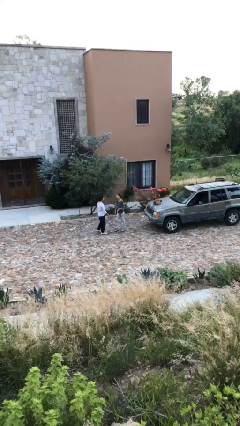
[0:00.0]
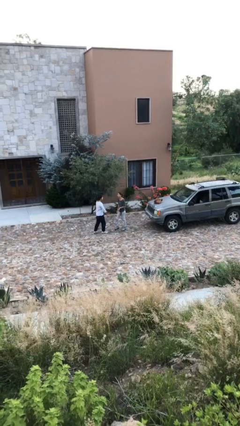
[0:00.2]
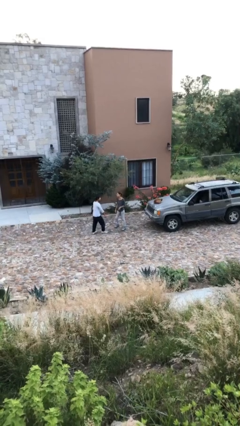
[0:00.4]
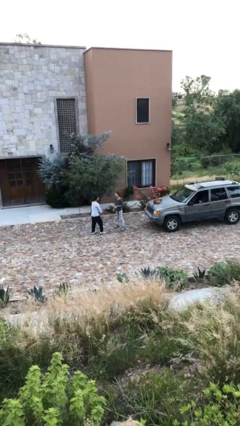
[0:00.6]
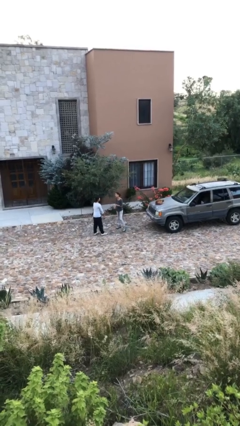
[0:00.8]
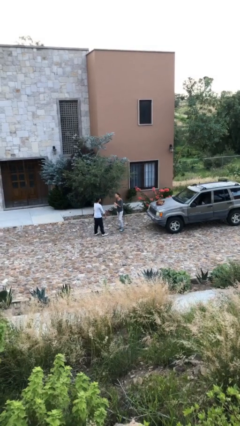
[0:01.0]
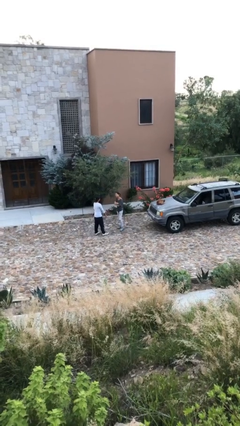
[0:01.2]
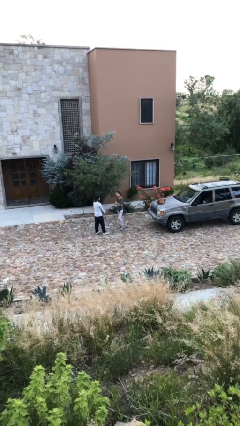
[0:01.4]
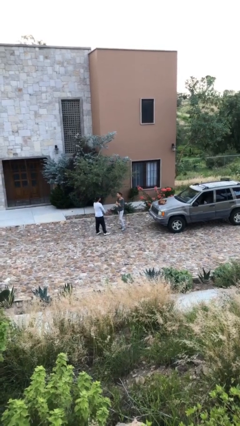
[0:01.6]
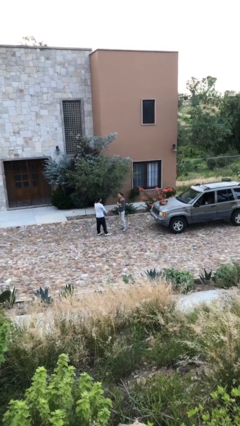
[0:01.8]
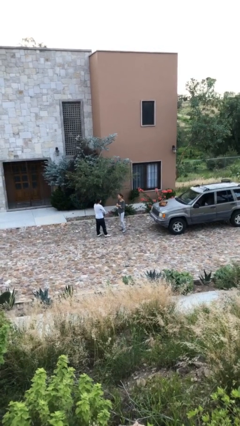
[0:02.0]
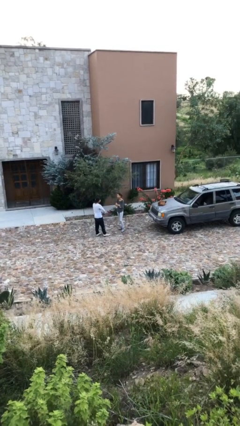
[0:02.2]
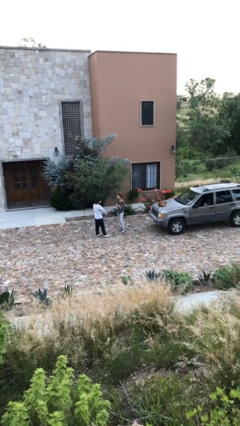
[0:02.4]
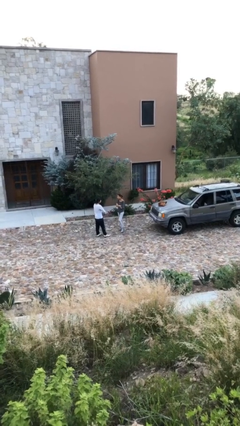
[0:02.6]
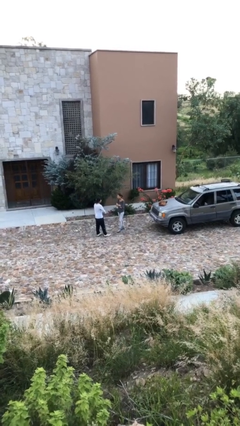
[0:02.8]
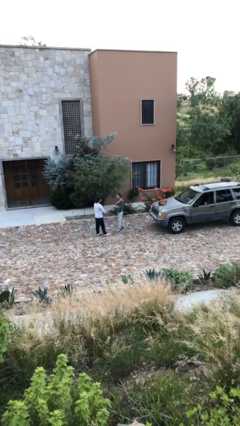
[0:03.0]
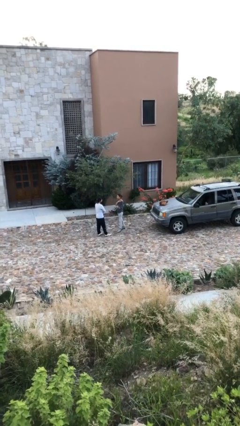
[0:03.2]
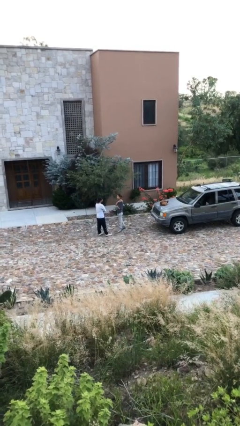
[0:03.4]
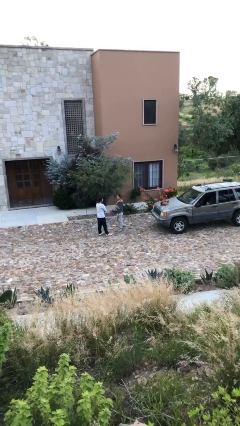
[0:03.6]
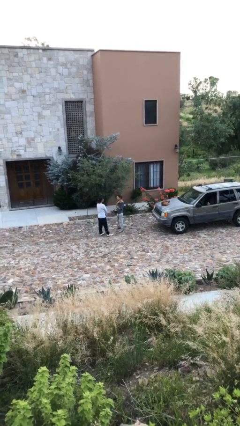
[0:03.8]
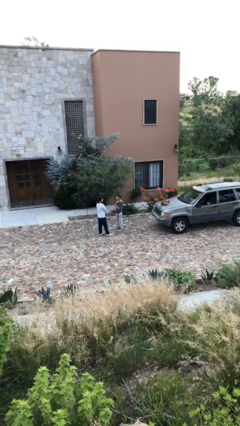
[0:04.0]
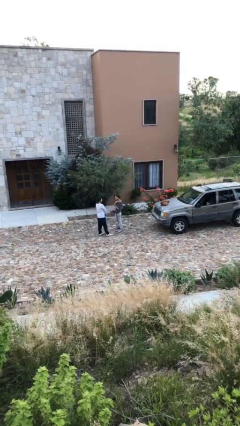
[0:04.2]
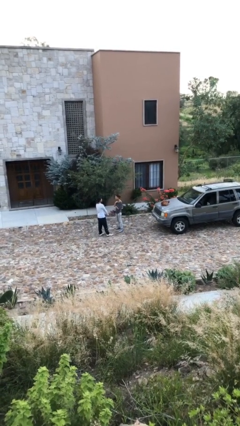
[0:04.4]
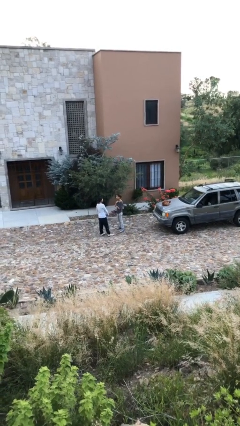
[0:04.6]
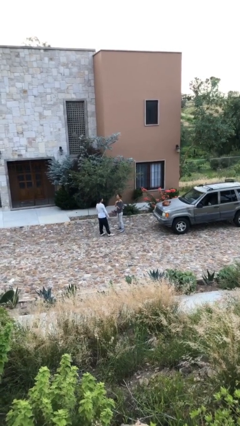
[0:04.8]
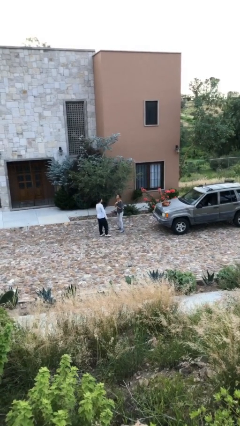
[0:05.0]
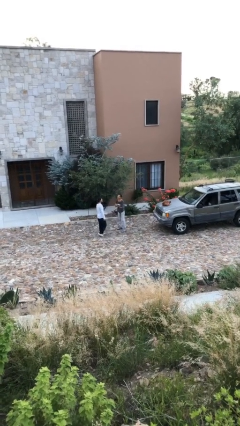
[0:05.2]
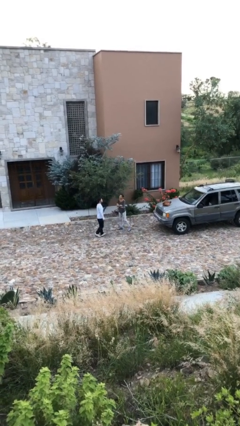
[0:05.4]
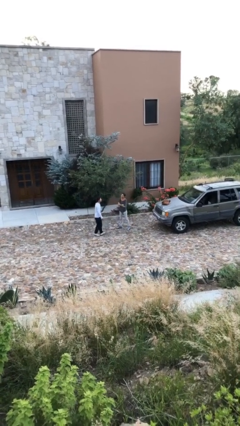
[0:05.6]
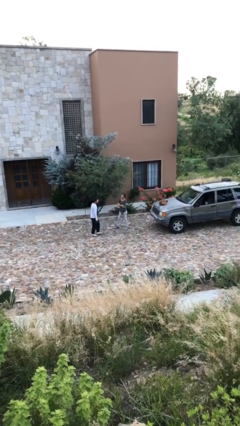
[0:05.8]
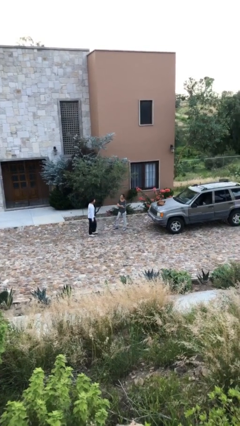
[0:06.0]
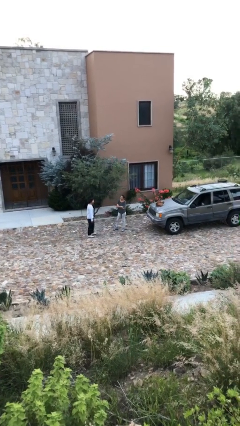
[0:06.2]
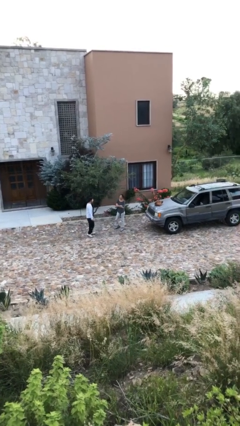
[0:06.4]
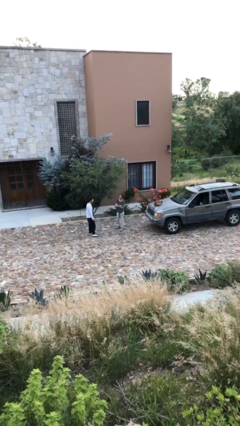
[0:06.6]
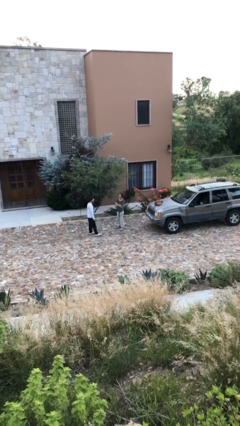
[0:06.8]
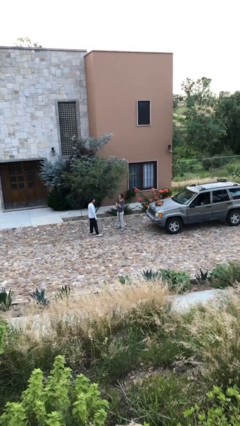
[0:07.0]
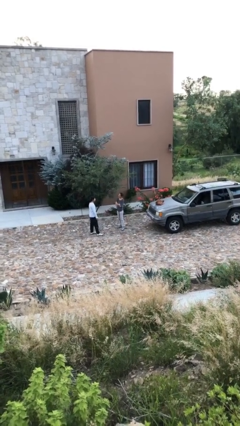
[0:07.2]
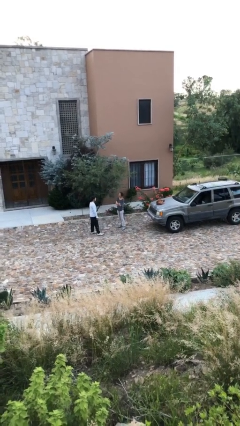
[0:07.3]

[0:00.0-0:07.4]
person talks to person

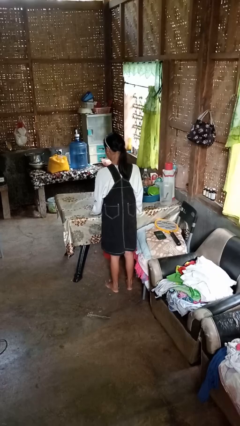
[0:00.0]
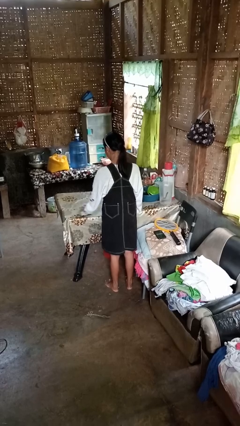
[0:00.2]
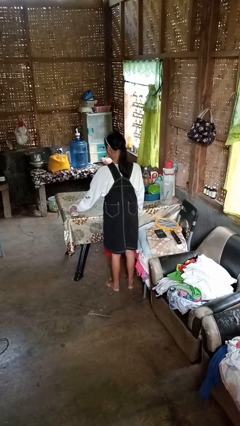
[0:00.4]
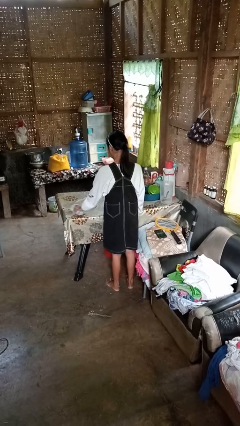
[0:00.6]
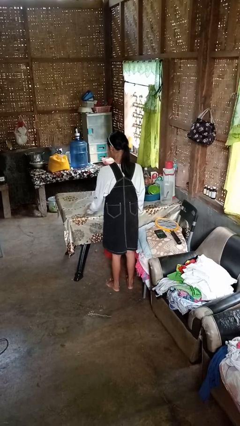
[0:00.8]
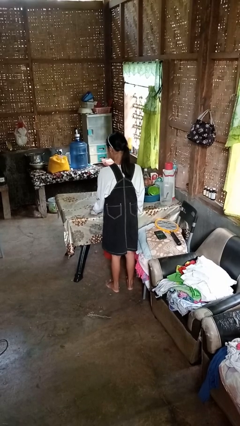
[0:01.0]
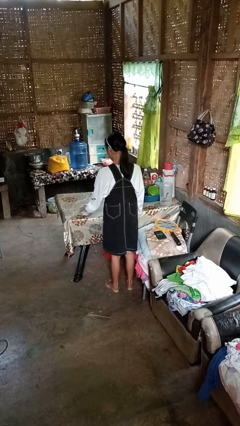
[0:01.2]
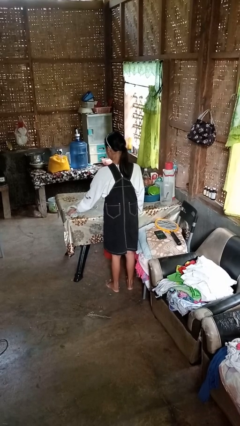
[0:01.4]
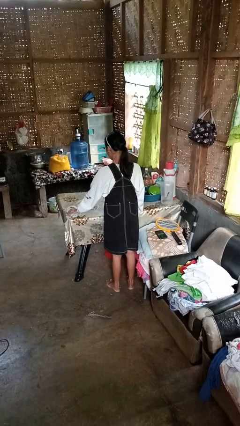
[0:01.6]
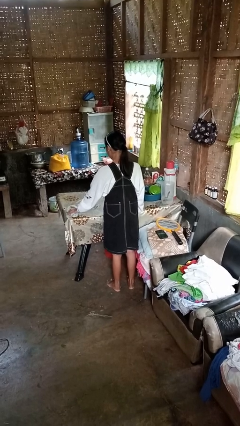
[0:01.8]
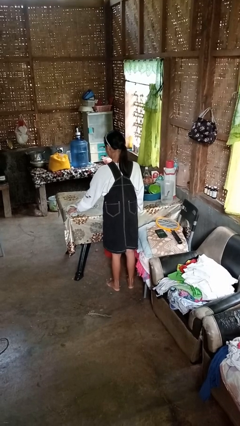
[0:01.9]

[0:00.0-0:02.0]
person cleans table with rag

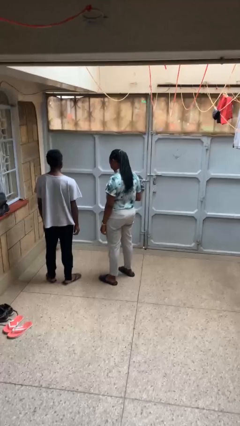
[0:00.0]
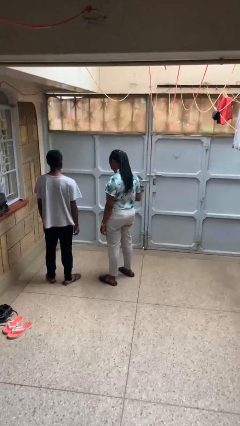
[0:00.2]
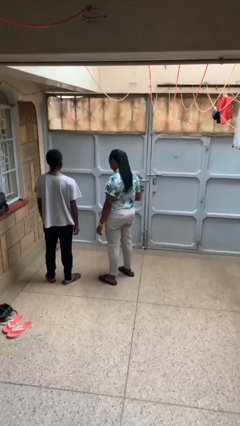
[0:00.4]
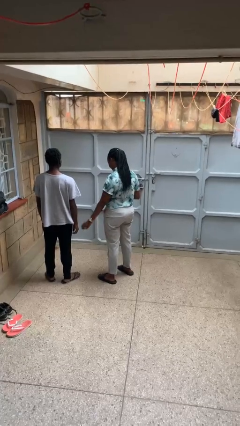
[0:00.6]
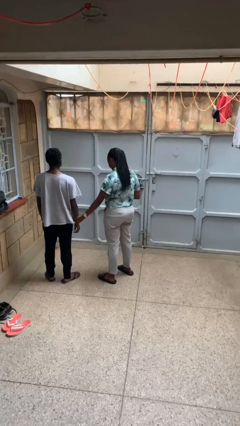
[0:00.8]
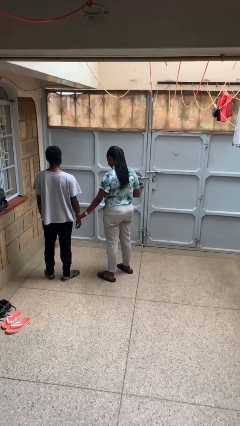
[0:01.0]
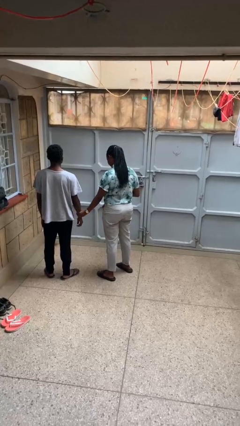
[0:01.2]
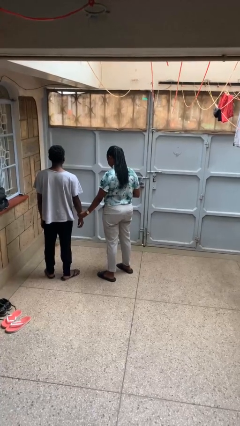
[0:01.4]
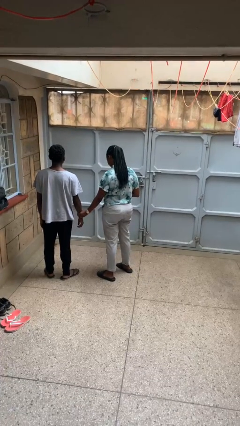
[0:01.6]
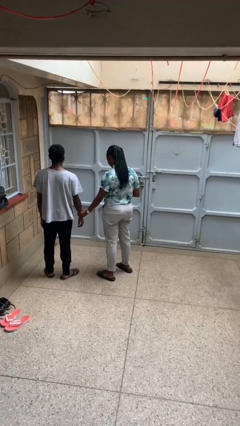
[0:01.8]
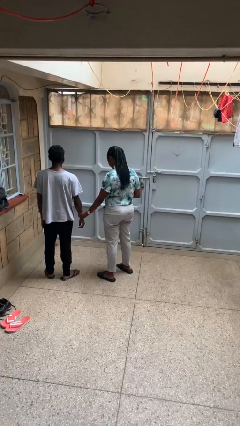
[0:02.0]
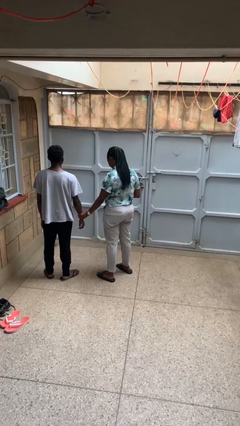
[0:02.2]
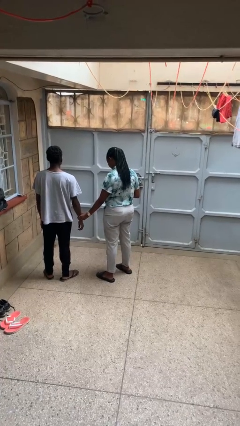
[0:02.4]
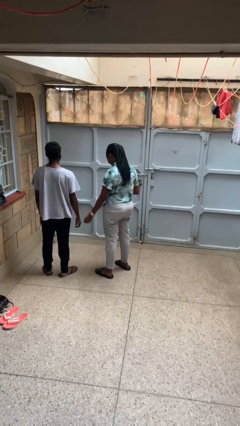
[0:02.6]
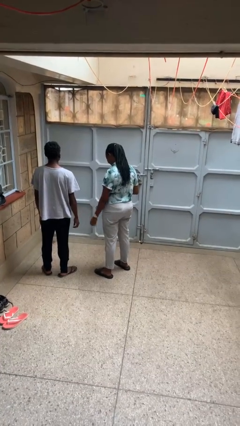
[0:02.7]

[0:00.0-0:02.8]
person grabs person by forearm

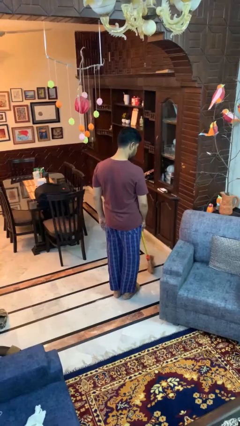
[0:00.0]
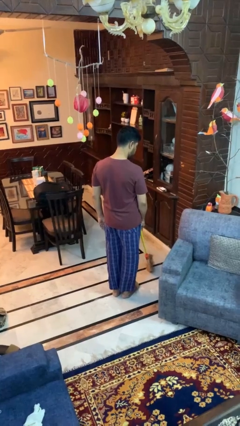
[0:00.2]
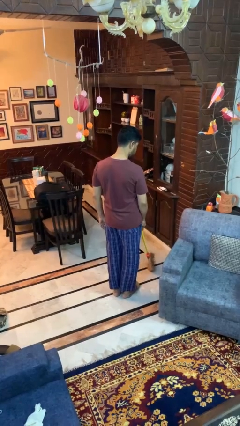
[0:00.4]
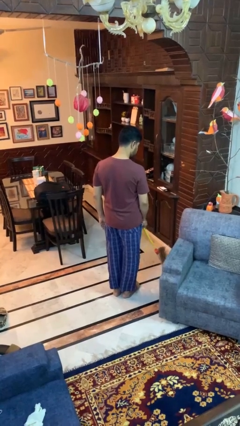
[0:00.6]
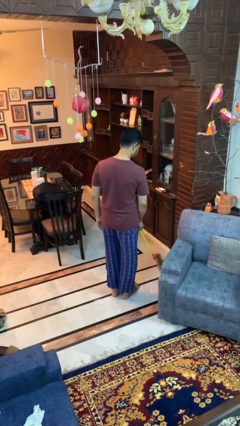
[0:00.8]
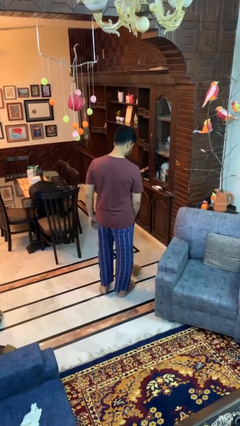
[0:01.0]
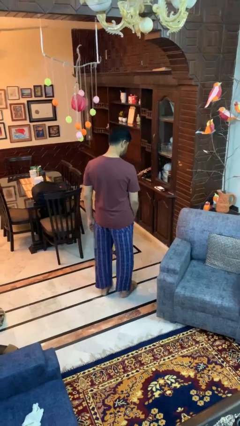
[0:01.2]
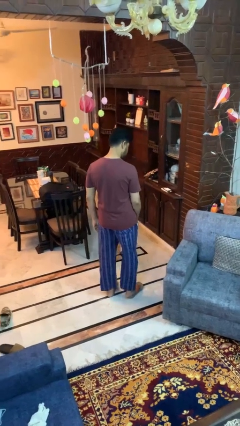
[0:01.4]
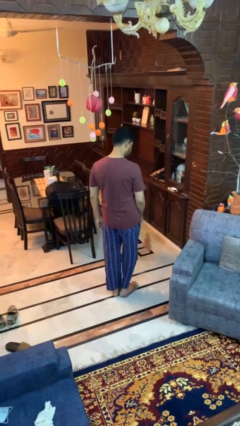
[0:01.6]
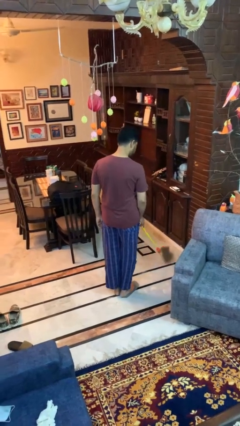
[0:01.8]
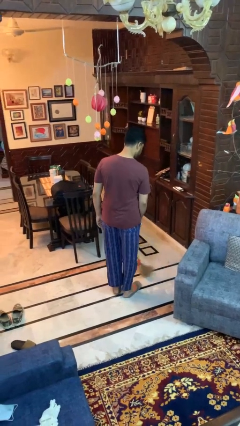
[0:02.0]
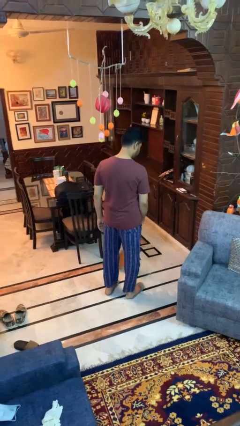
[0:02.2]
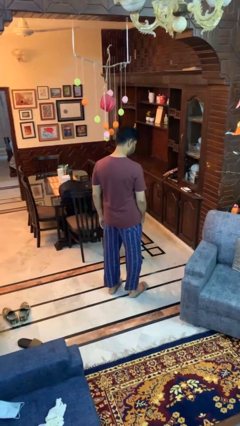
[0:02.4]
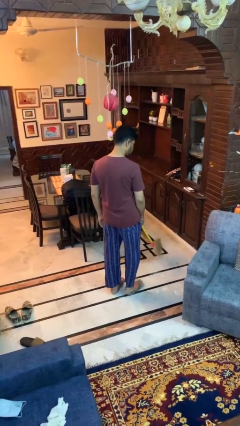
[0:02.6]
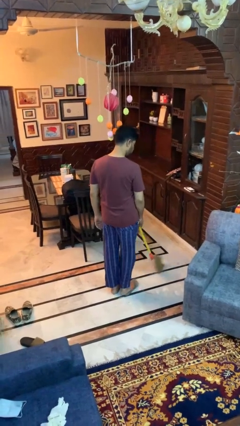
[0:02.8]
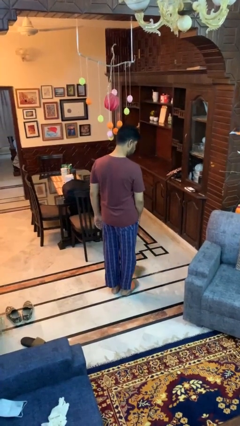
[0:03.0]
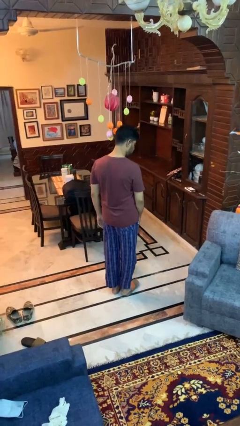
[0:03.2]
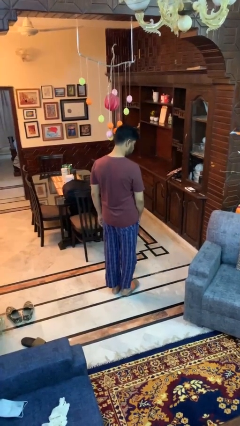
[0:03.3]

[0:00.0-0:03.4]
person sweeps floor

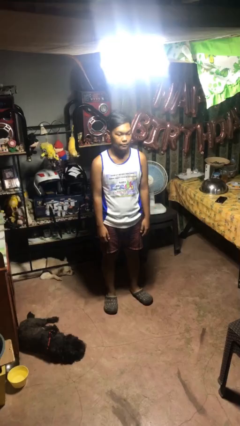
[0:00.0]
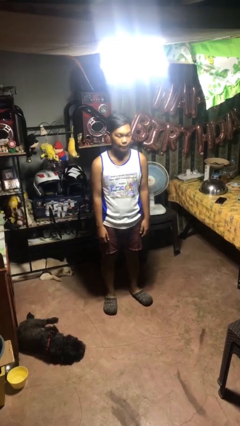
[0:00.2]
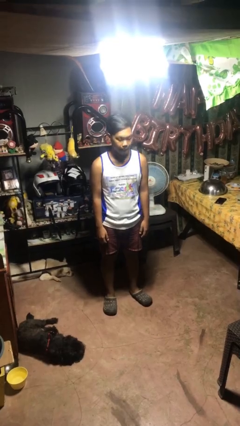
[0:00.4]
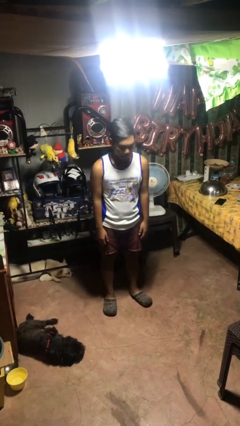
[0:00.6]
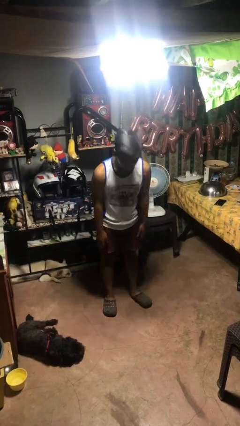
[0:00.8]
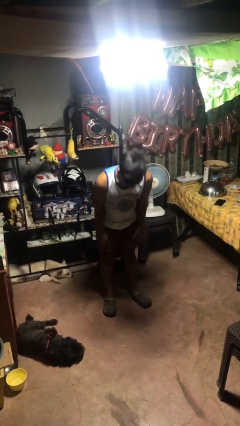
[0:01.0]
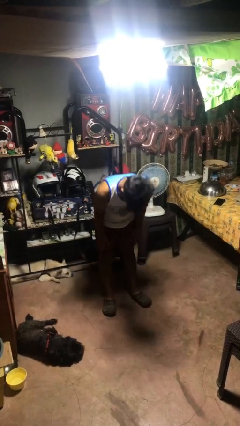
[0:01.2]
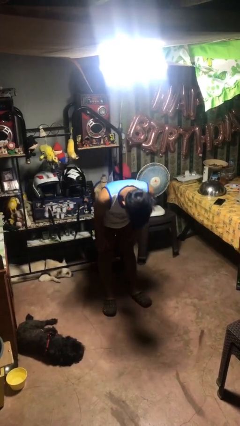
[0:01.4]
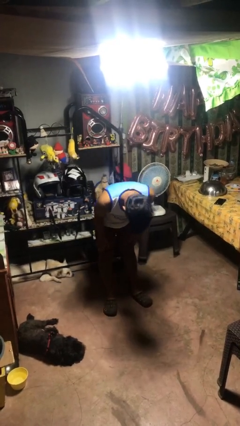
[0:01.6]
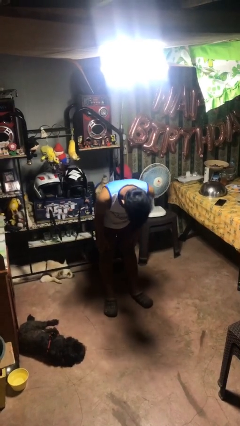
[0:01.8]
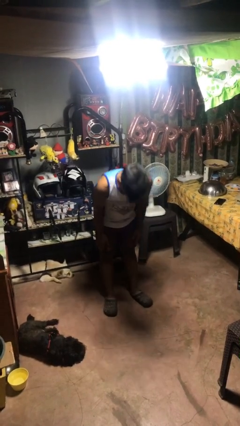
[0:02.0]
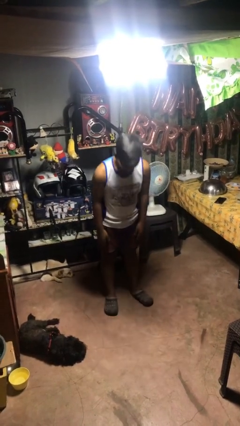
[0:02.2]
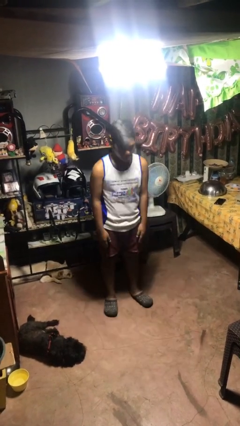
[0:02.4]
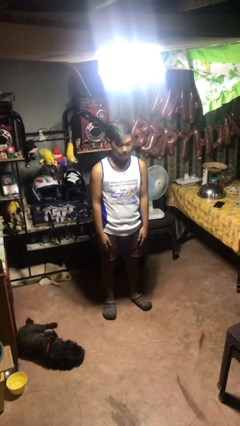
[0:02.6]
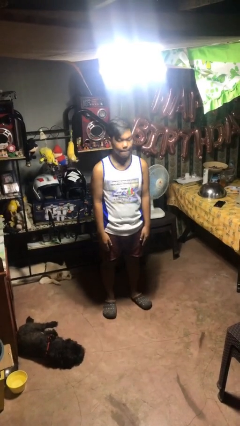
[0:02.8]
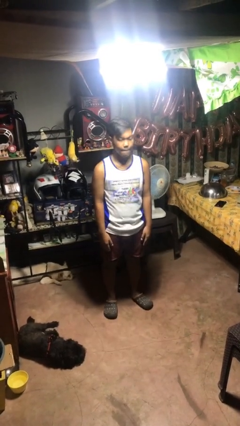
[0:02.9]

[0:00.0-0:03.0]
person bows
